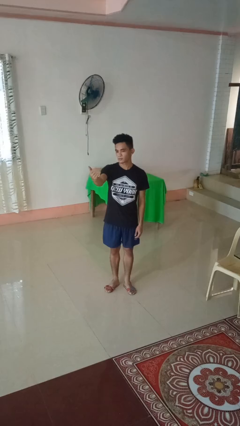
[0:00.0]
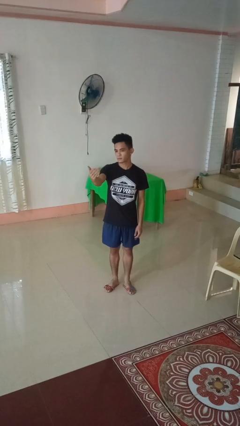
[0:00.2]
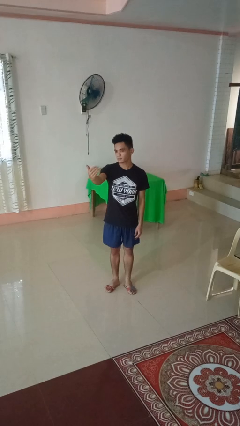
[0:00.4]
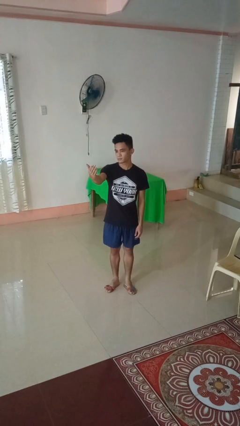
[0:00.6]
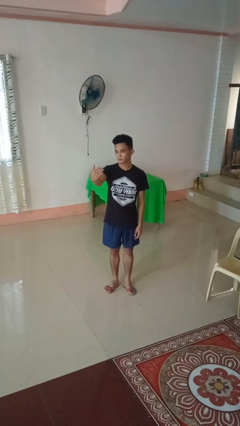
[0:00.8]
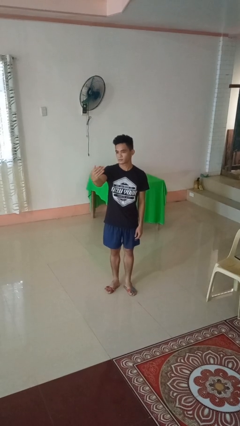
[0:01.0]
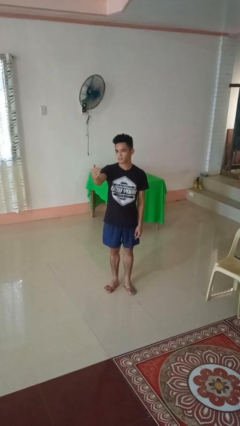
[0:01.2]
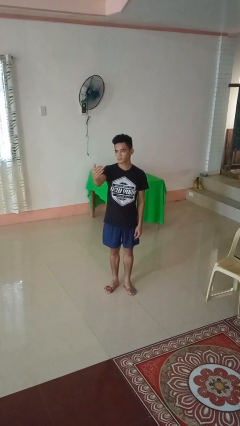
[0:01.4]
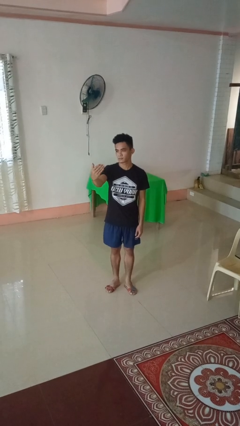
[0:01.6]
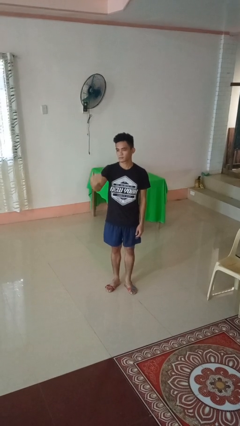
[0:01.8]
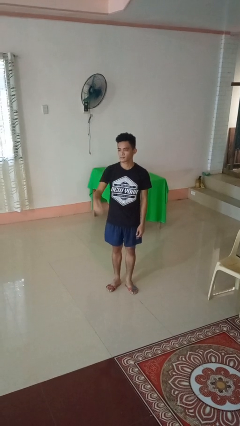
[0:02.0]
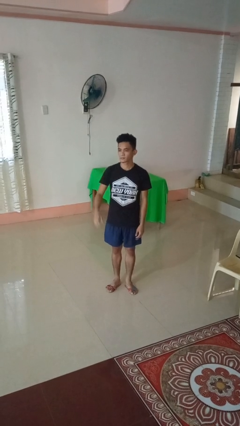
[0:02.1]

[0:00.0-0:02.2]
person gestures come here

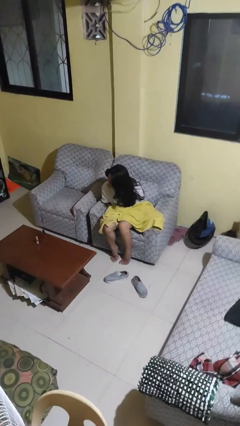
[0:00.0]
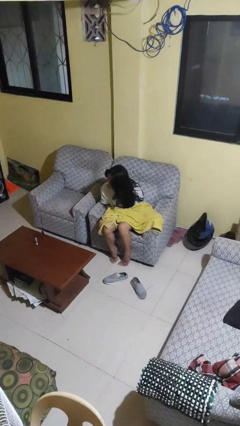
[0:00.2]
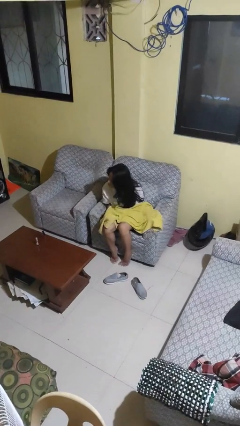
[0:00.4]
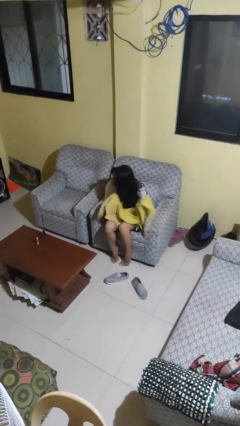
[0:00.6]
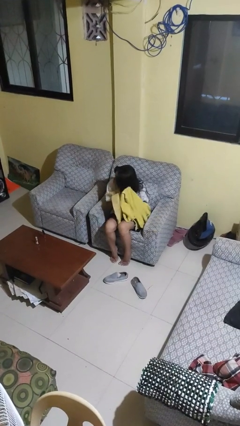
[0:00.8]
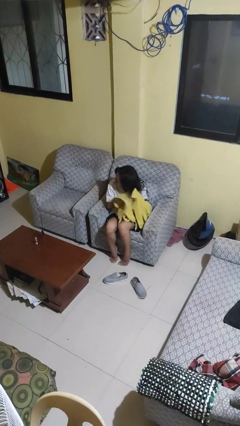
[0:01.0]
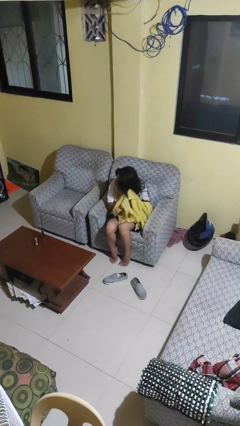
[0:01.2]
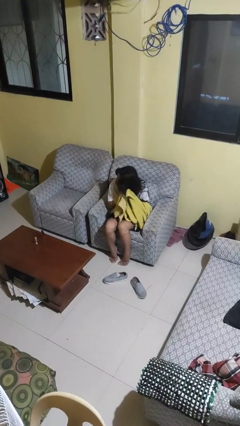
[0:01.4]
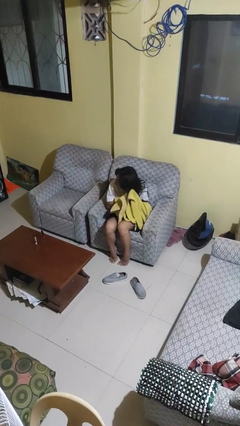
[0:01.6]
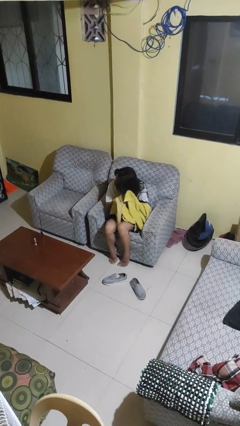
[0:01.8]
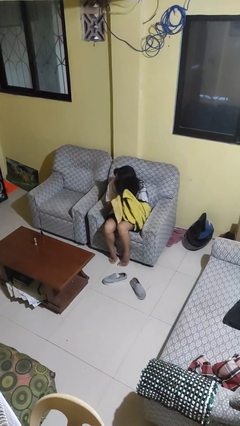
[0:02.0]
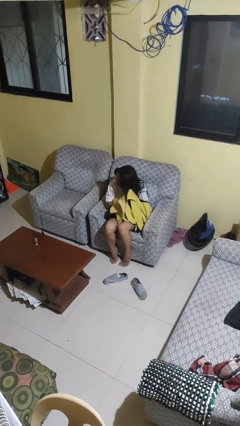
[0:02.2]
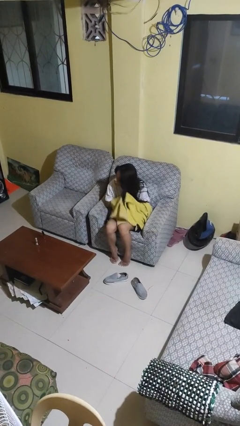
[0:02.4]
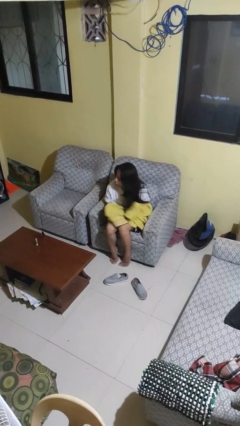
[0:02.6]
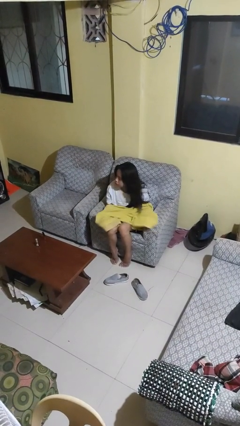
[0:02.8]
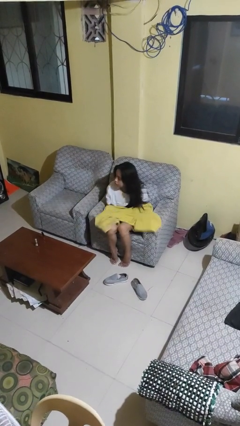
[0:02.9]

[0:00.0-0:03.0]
person dries hair with towel

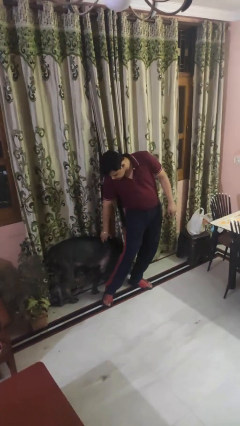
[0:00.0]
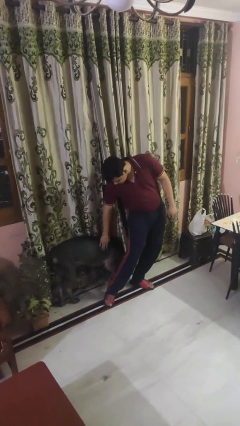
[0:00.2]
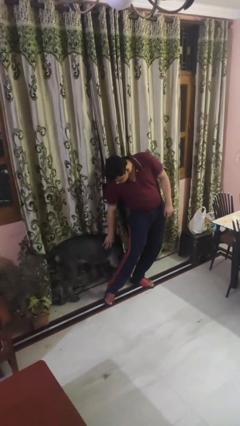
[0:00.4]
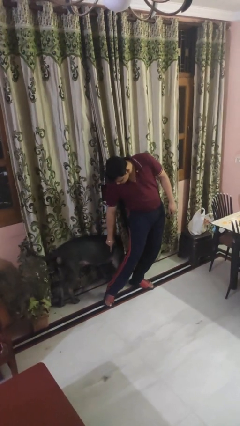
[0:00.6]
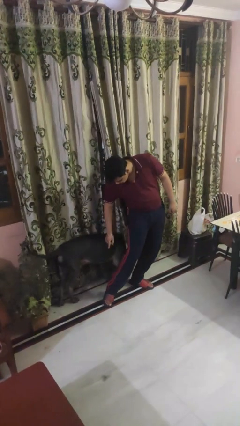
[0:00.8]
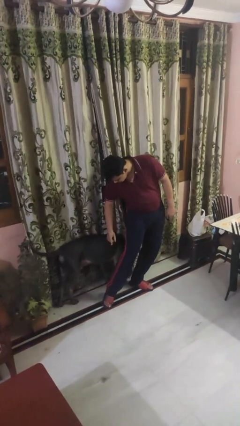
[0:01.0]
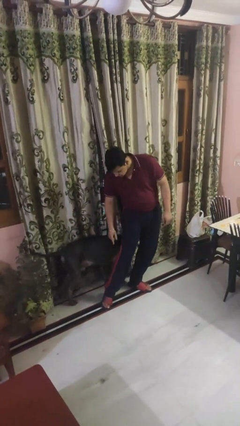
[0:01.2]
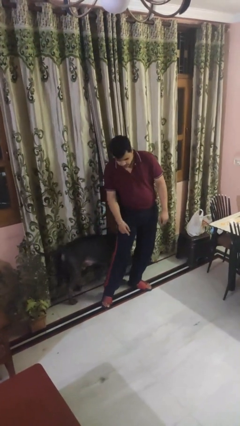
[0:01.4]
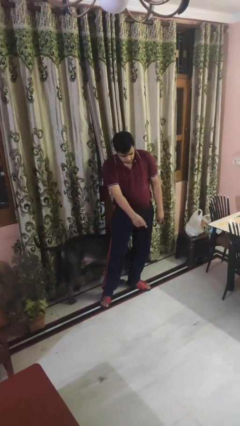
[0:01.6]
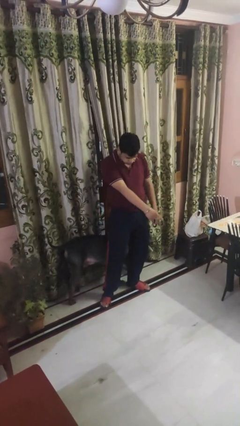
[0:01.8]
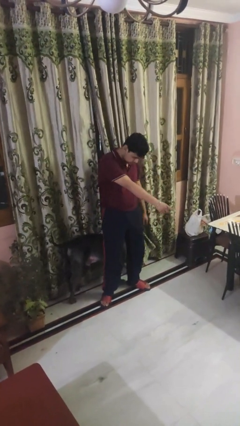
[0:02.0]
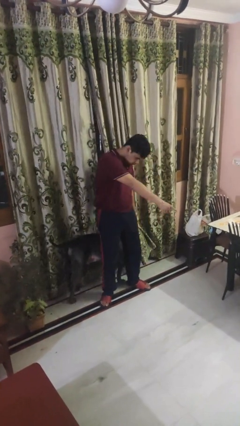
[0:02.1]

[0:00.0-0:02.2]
person points to dog

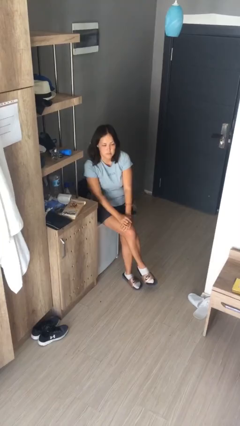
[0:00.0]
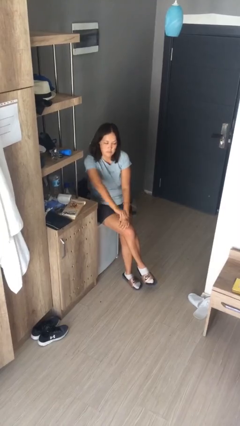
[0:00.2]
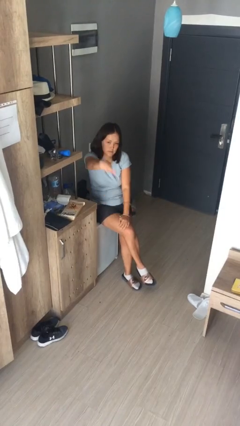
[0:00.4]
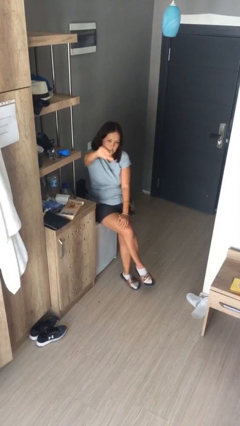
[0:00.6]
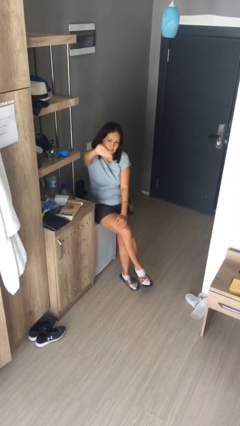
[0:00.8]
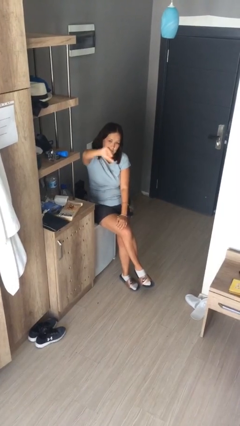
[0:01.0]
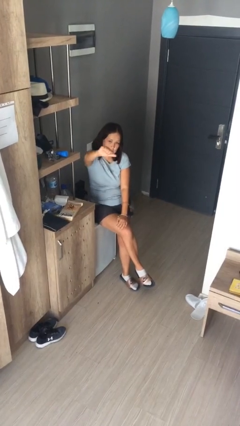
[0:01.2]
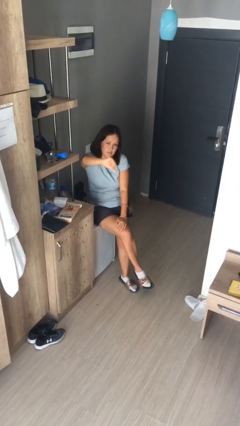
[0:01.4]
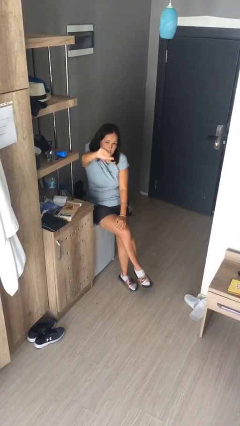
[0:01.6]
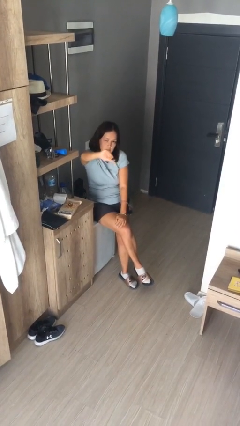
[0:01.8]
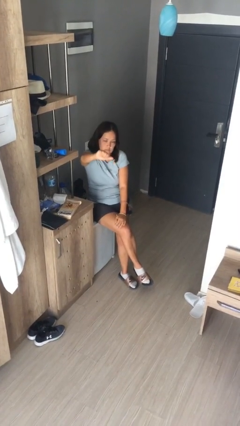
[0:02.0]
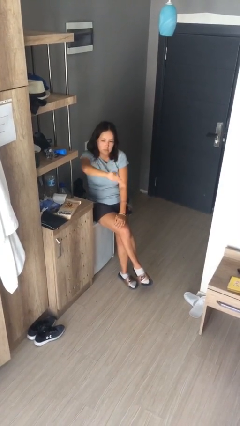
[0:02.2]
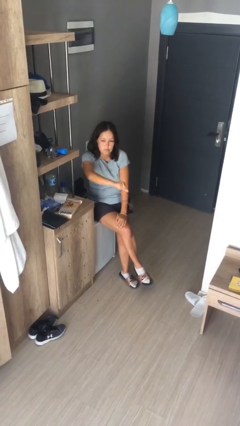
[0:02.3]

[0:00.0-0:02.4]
person gestures thumbs down

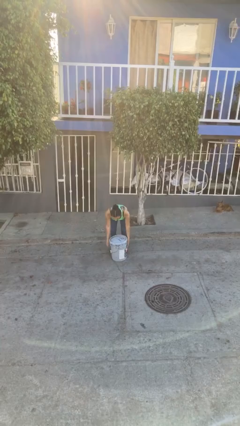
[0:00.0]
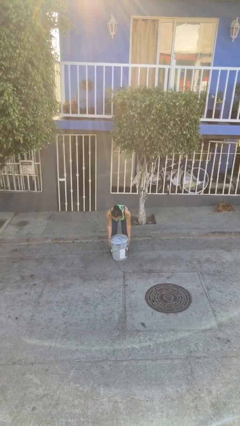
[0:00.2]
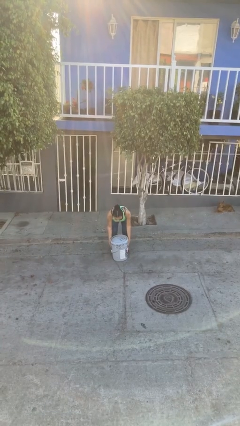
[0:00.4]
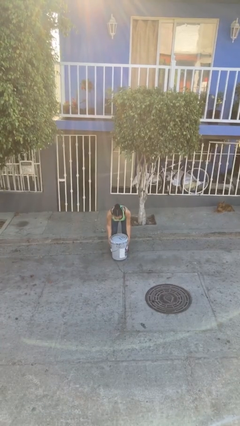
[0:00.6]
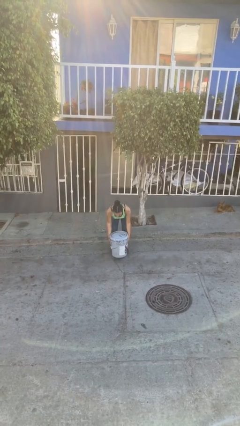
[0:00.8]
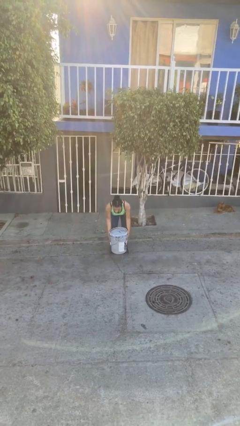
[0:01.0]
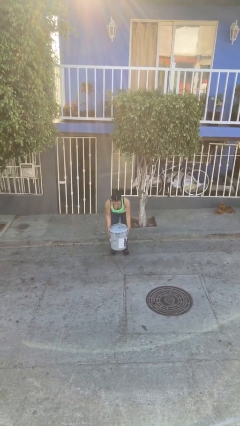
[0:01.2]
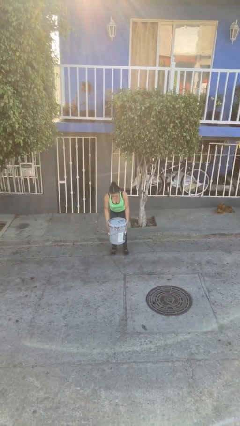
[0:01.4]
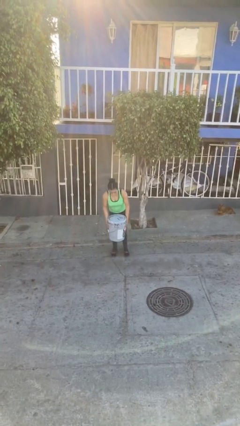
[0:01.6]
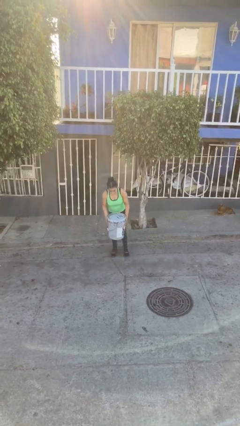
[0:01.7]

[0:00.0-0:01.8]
person picks up object from floor

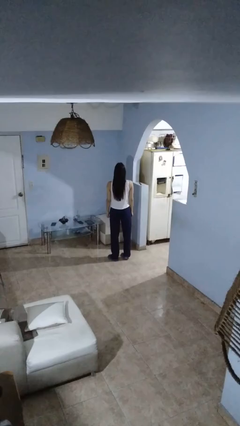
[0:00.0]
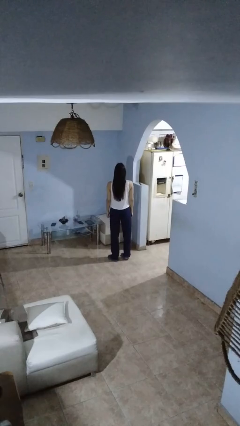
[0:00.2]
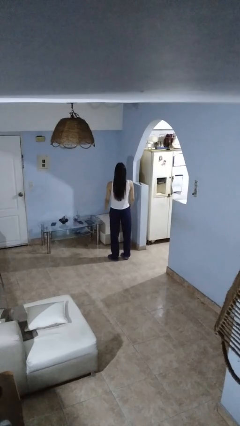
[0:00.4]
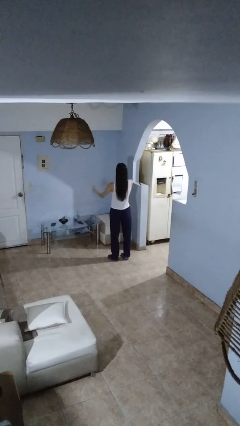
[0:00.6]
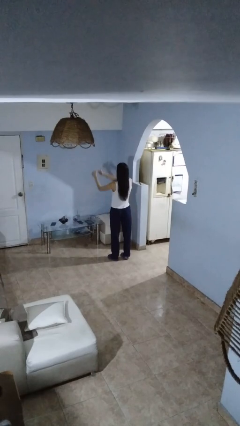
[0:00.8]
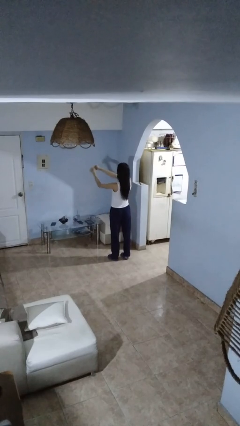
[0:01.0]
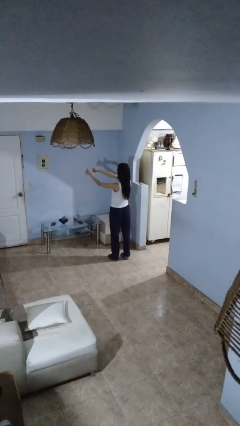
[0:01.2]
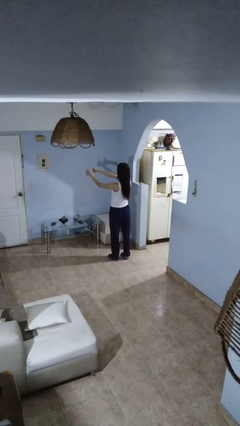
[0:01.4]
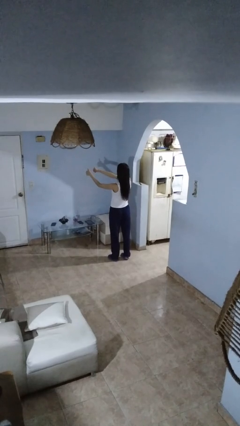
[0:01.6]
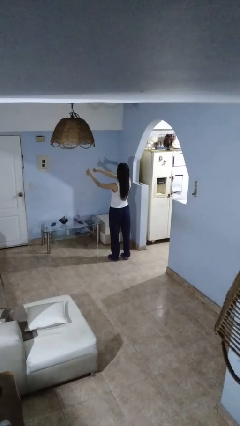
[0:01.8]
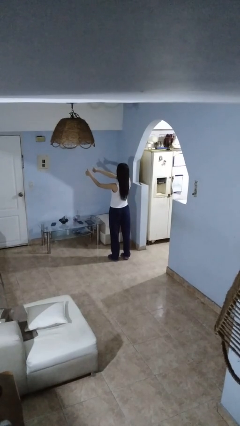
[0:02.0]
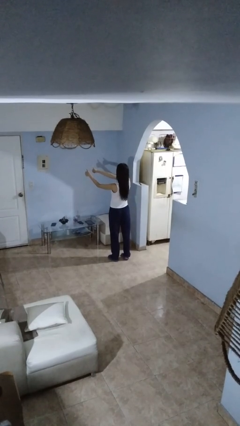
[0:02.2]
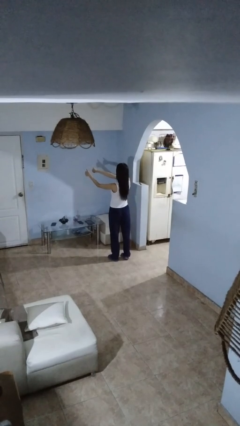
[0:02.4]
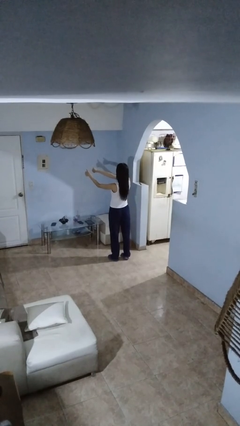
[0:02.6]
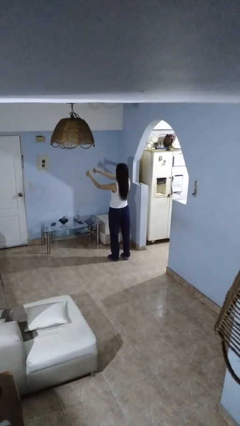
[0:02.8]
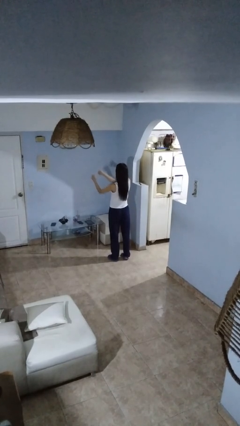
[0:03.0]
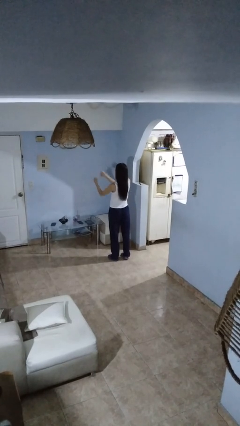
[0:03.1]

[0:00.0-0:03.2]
person gestures thumbs up

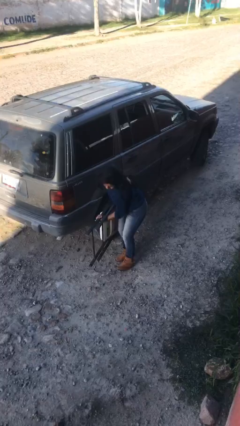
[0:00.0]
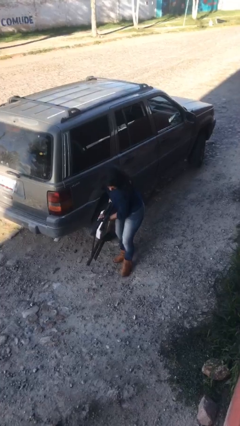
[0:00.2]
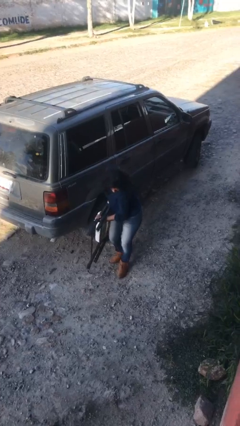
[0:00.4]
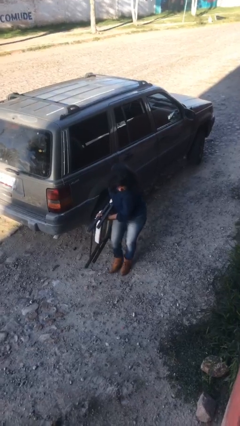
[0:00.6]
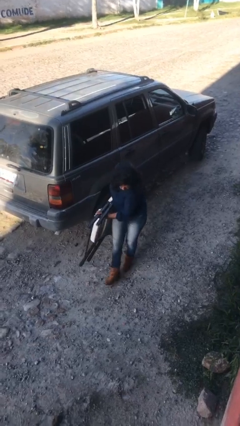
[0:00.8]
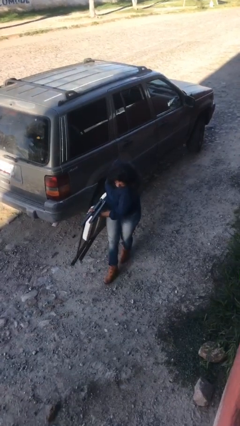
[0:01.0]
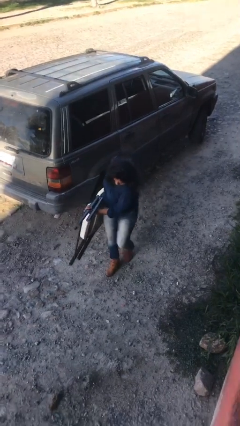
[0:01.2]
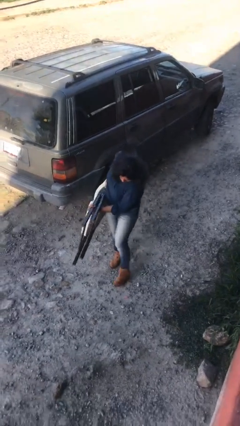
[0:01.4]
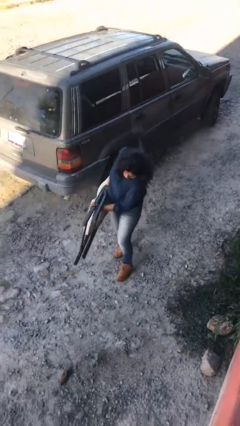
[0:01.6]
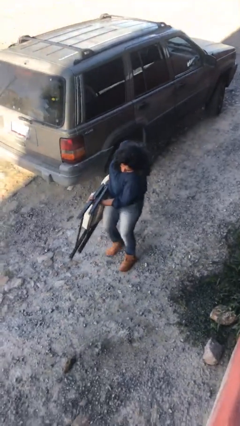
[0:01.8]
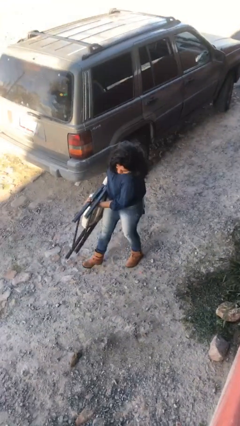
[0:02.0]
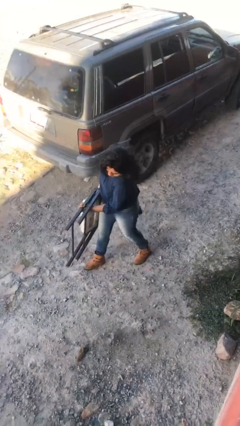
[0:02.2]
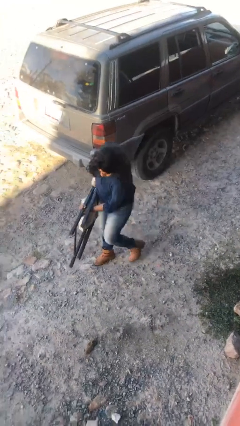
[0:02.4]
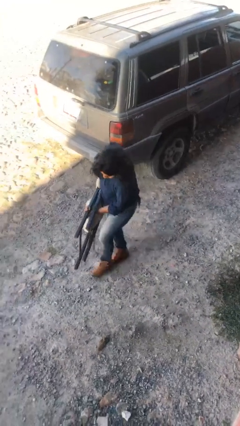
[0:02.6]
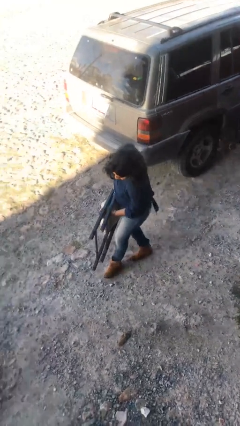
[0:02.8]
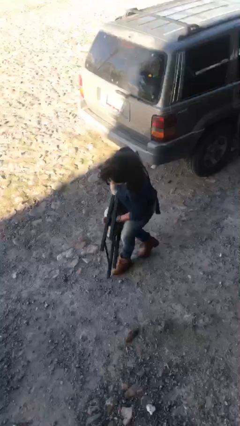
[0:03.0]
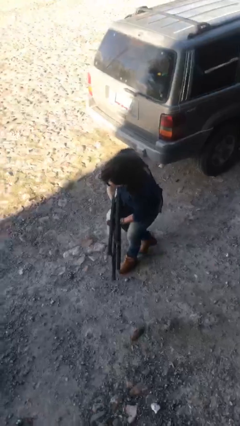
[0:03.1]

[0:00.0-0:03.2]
person carries heavy object
